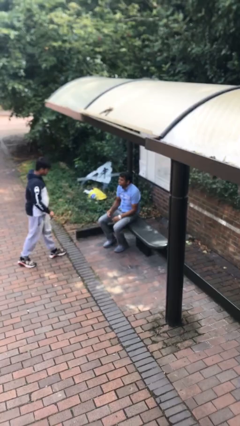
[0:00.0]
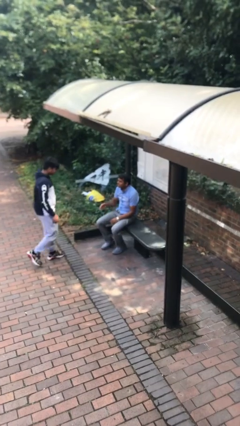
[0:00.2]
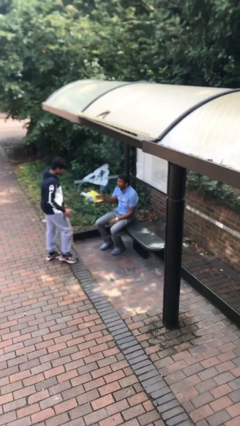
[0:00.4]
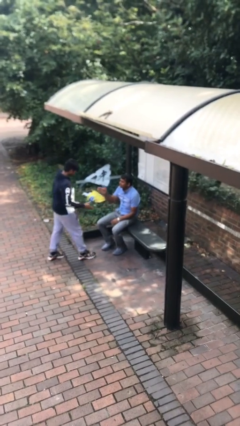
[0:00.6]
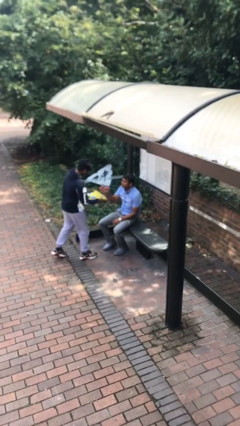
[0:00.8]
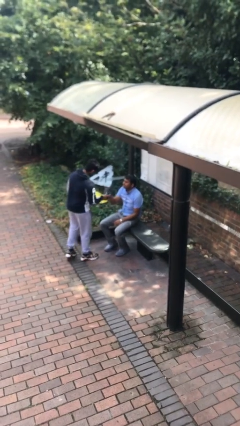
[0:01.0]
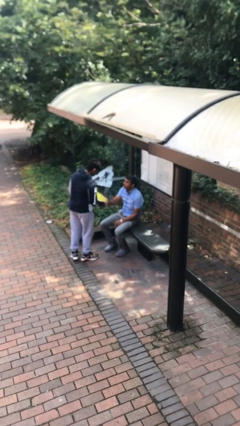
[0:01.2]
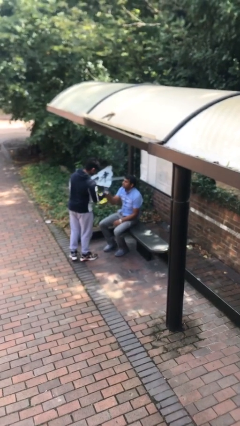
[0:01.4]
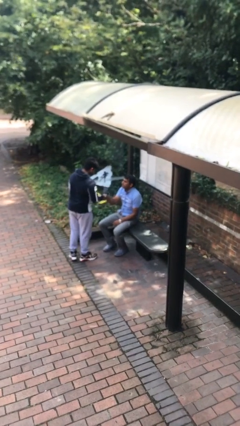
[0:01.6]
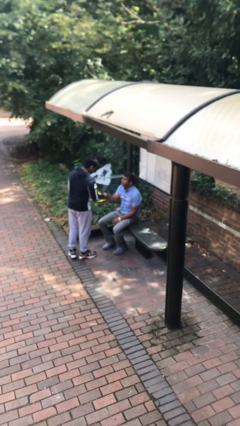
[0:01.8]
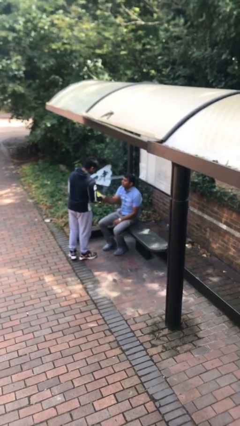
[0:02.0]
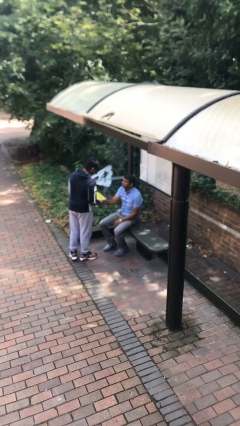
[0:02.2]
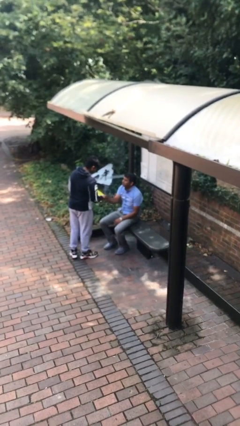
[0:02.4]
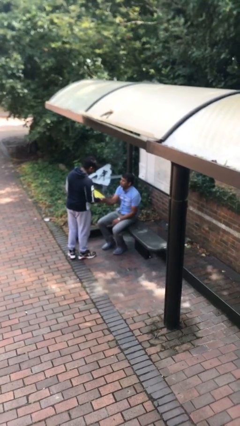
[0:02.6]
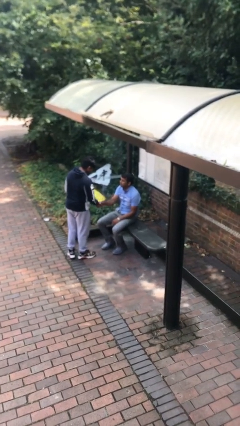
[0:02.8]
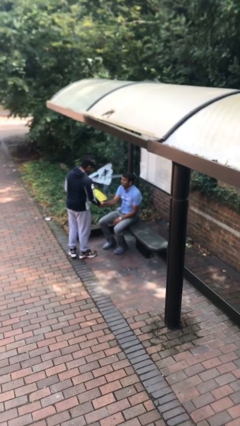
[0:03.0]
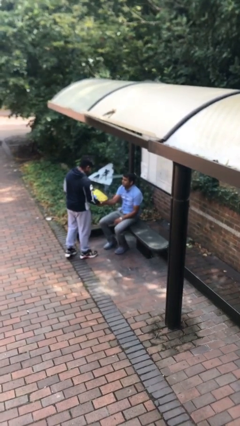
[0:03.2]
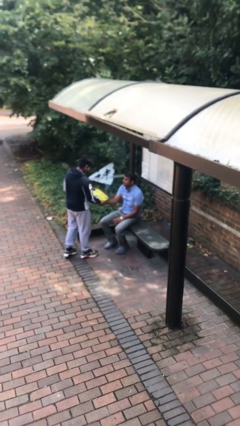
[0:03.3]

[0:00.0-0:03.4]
person shakes hand

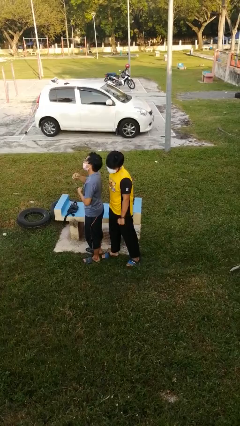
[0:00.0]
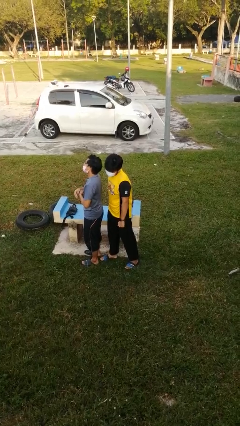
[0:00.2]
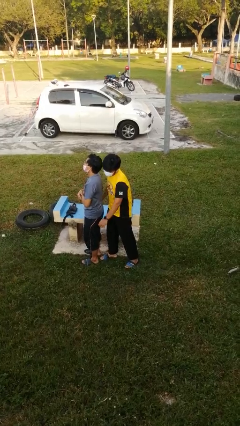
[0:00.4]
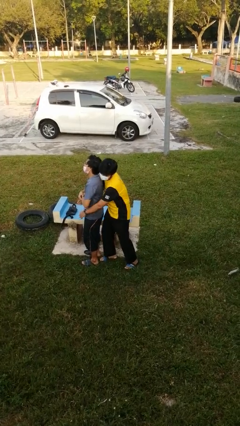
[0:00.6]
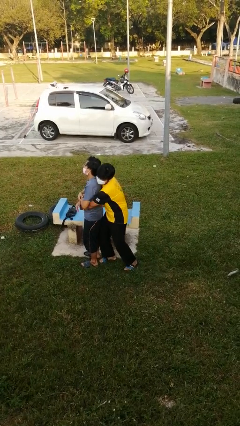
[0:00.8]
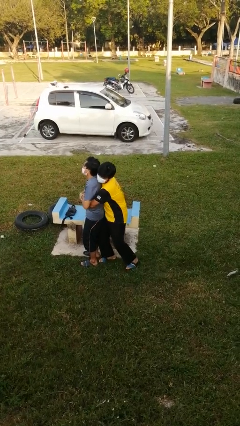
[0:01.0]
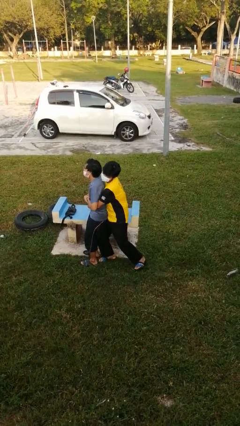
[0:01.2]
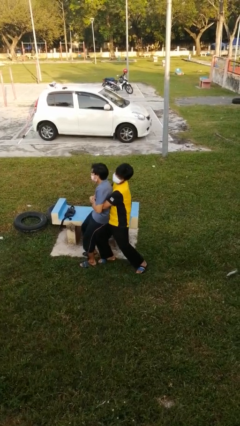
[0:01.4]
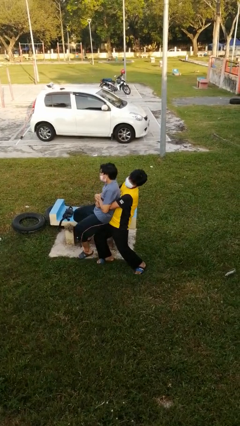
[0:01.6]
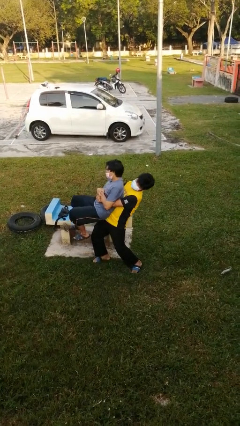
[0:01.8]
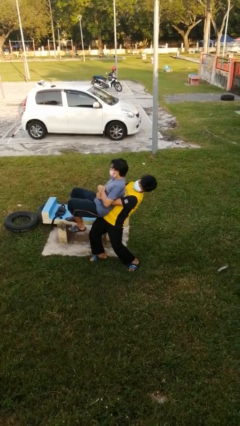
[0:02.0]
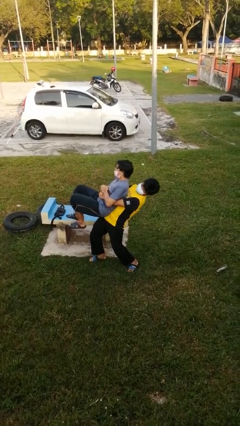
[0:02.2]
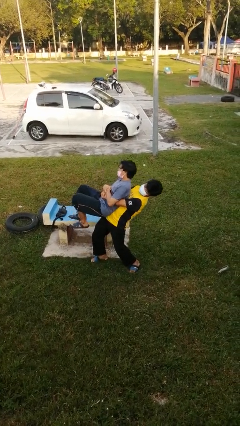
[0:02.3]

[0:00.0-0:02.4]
person picks up person

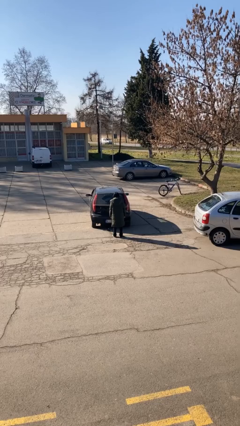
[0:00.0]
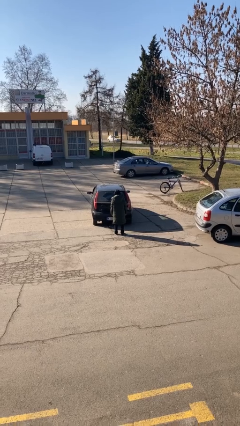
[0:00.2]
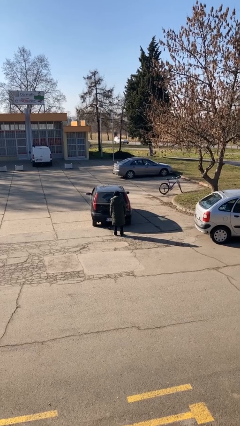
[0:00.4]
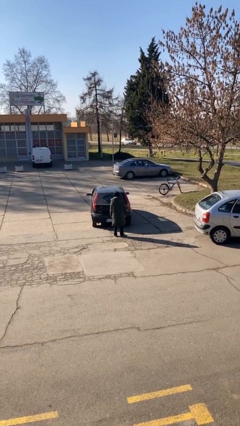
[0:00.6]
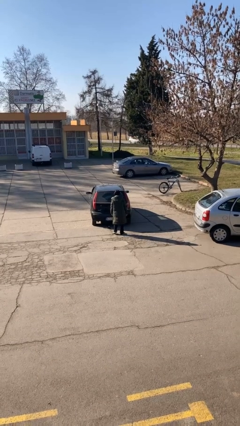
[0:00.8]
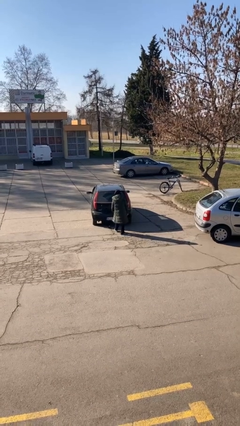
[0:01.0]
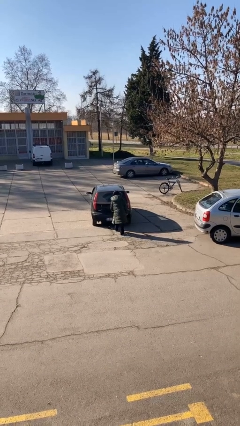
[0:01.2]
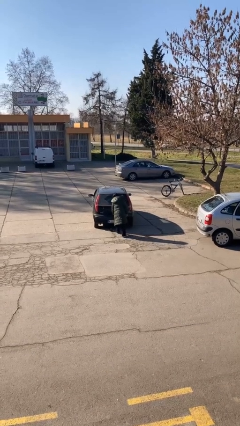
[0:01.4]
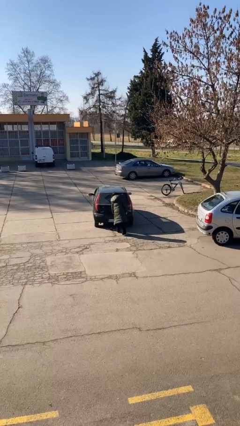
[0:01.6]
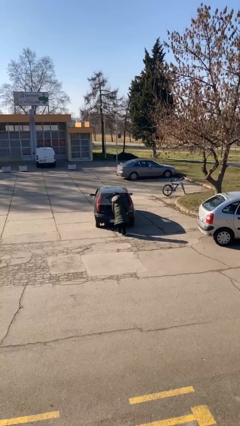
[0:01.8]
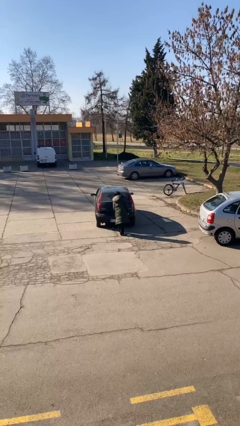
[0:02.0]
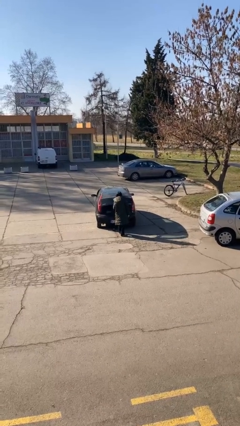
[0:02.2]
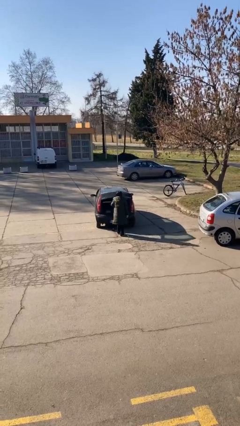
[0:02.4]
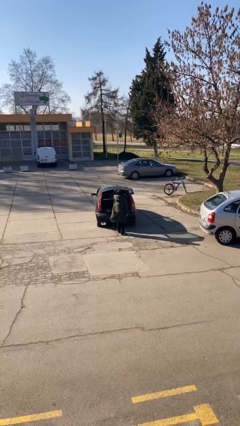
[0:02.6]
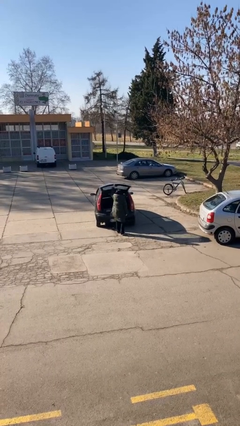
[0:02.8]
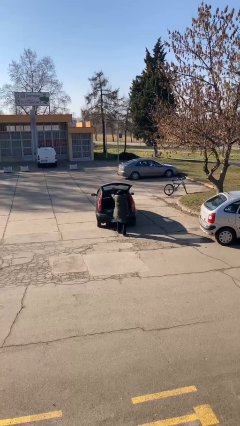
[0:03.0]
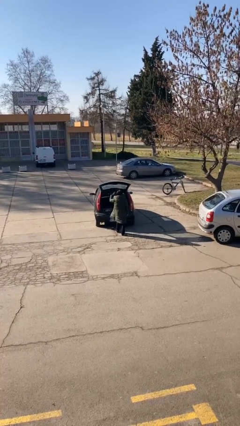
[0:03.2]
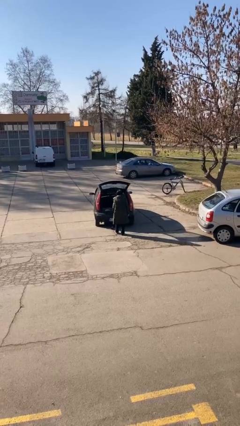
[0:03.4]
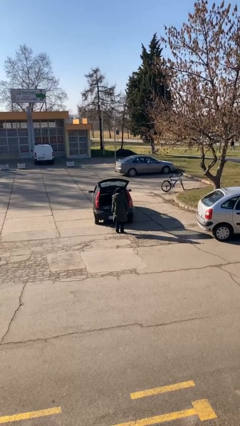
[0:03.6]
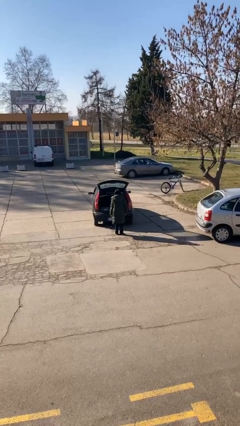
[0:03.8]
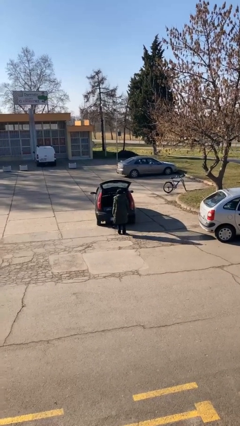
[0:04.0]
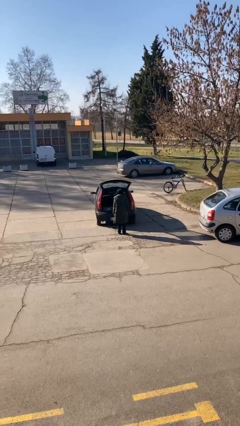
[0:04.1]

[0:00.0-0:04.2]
person opens car trunk

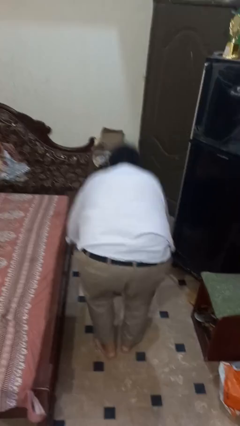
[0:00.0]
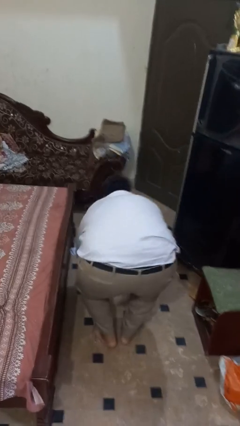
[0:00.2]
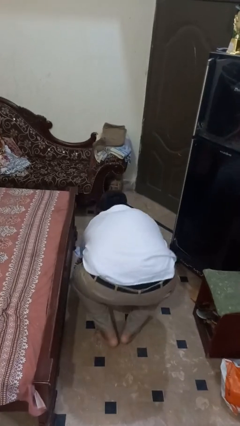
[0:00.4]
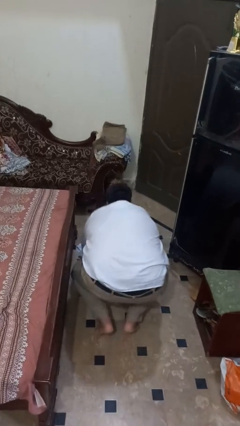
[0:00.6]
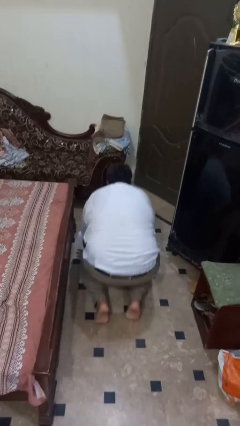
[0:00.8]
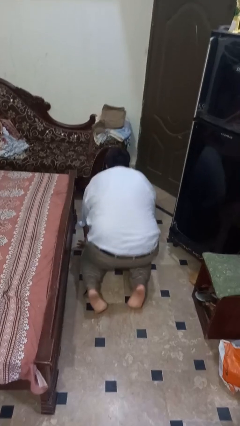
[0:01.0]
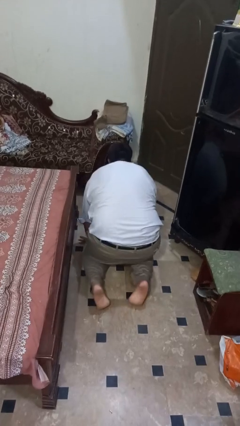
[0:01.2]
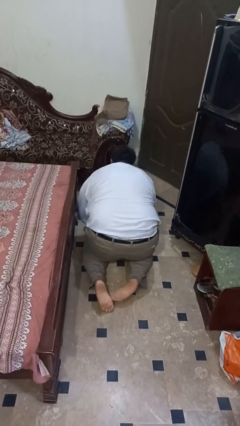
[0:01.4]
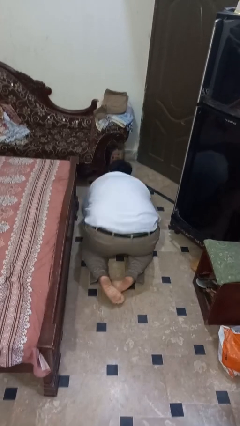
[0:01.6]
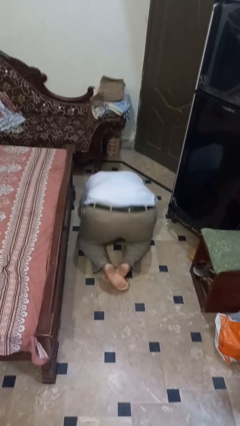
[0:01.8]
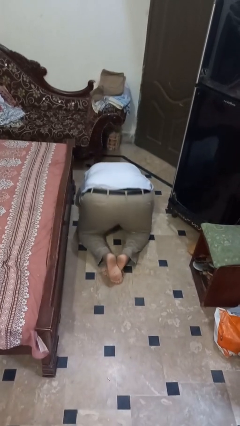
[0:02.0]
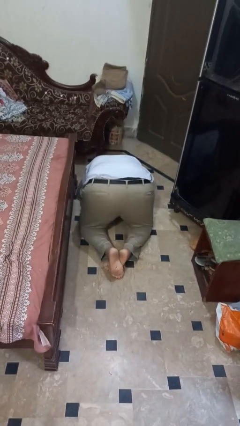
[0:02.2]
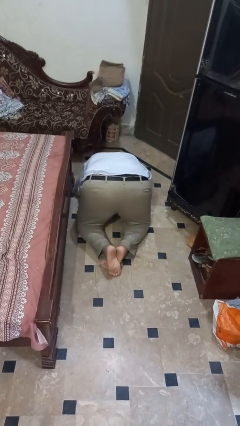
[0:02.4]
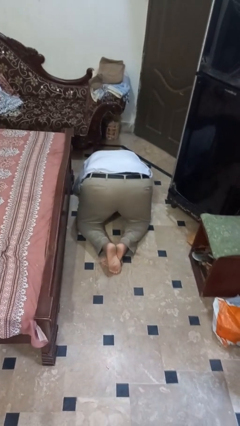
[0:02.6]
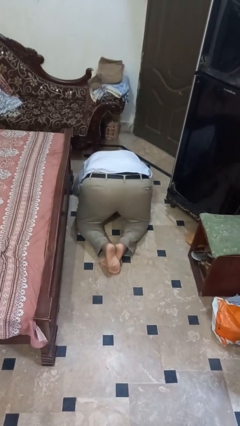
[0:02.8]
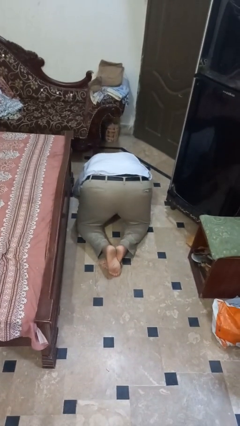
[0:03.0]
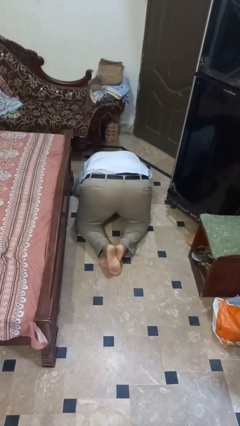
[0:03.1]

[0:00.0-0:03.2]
person lies down on floor

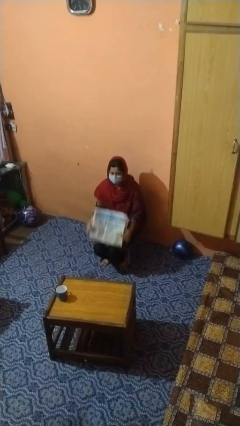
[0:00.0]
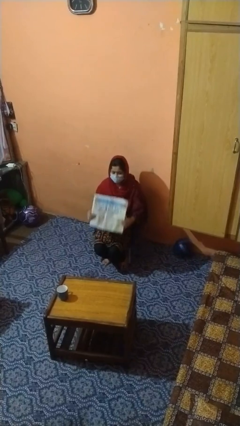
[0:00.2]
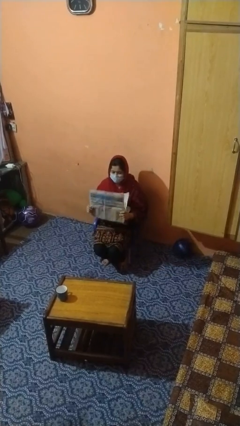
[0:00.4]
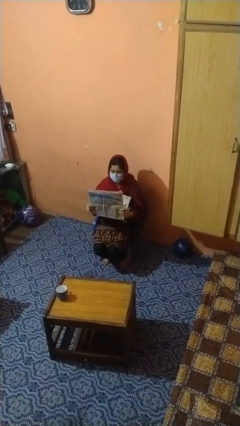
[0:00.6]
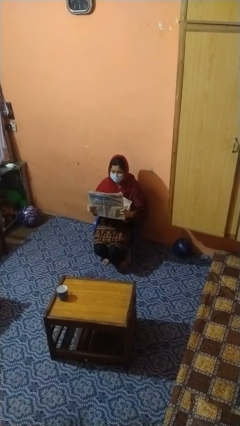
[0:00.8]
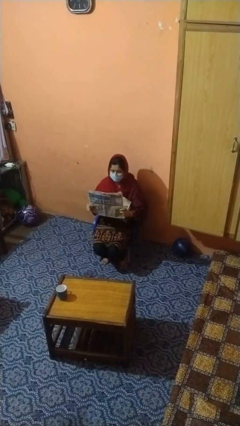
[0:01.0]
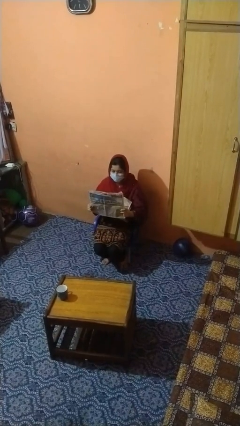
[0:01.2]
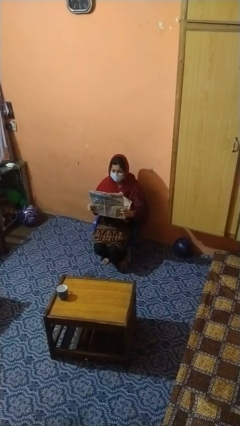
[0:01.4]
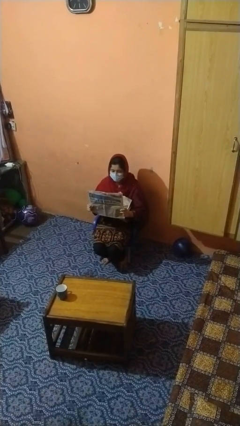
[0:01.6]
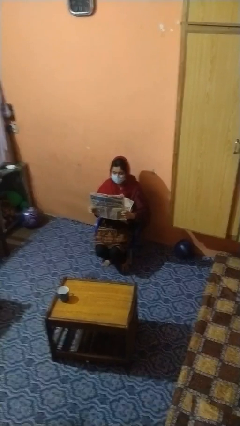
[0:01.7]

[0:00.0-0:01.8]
person reads newspaper

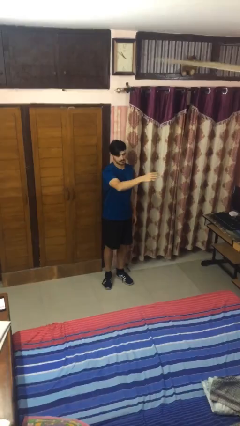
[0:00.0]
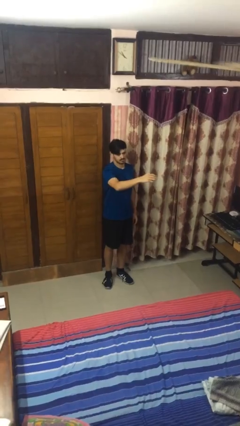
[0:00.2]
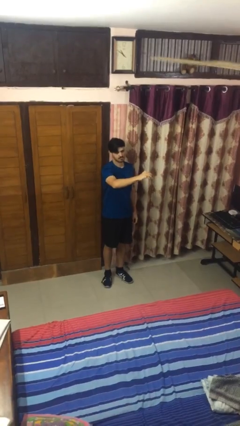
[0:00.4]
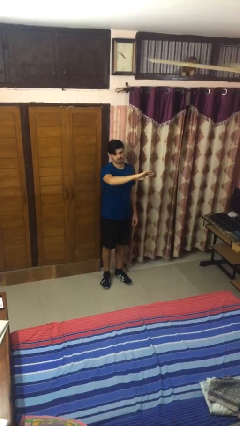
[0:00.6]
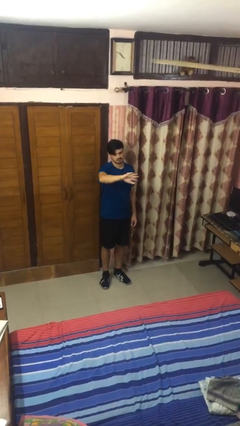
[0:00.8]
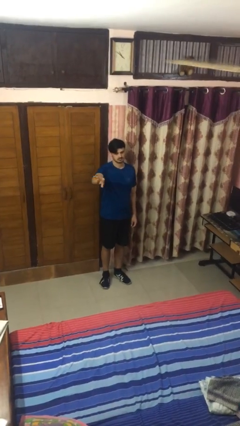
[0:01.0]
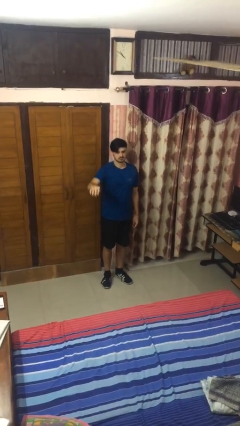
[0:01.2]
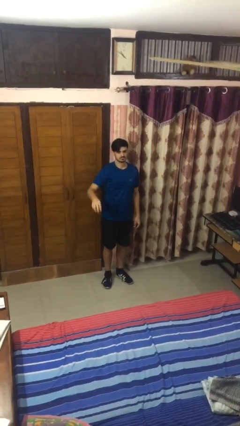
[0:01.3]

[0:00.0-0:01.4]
person gestures swipe right

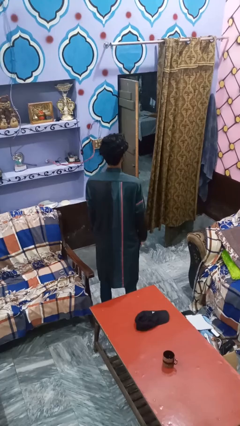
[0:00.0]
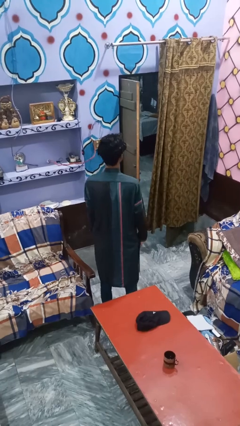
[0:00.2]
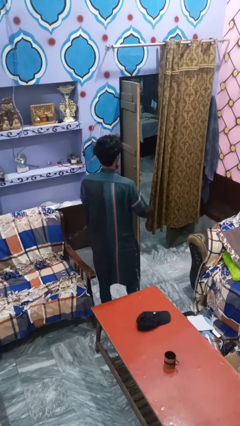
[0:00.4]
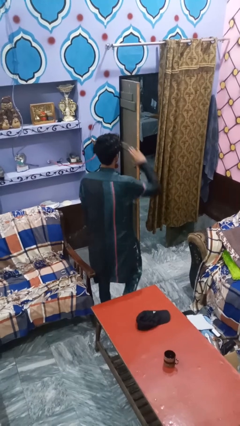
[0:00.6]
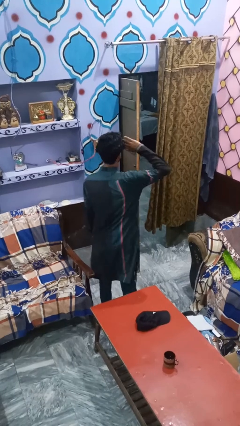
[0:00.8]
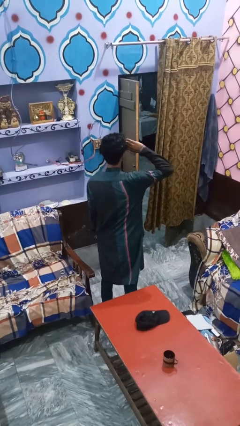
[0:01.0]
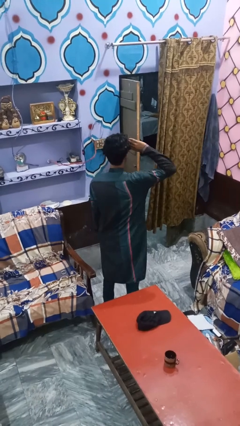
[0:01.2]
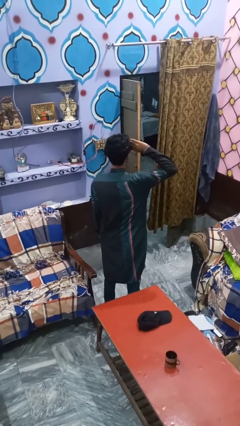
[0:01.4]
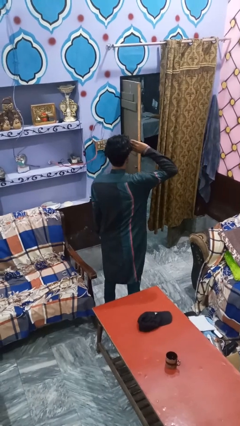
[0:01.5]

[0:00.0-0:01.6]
person salutes
